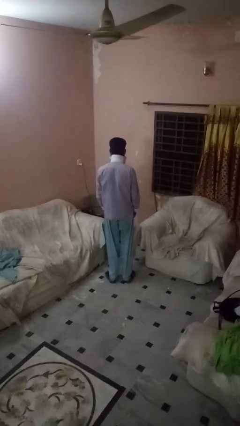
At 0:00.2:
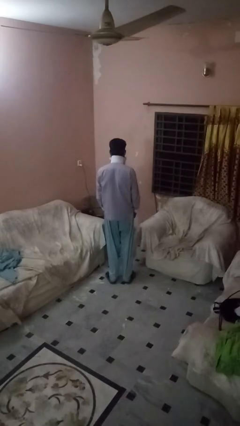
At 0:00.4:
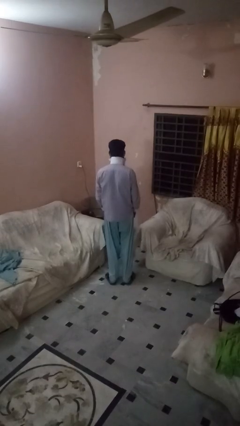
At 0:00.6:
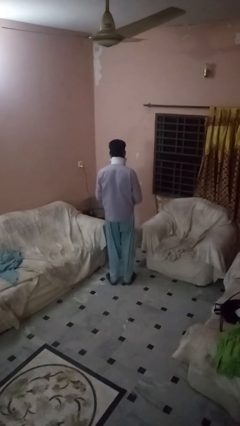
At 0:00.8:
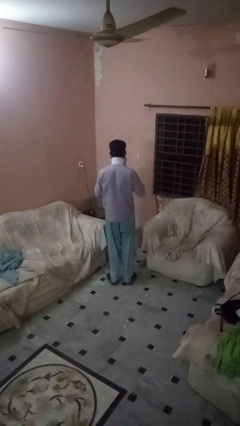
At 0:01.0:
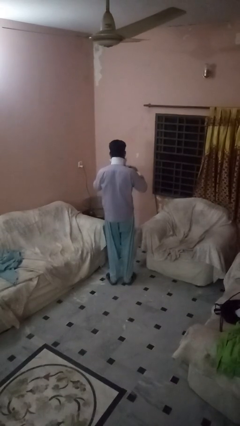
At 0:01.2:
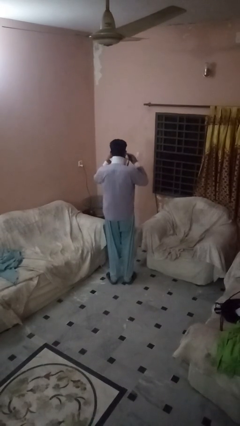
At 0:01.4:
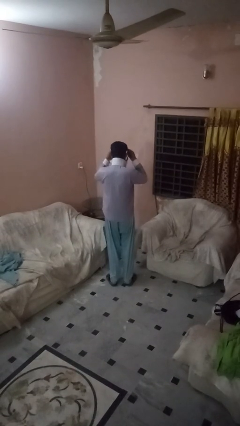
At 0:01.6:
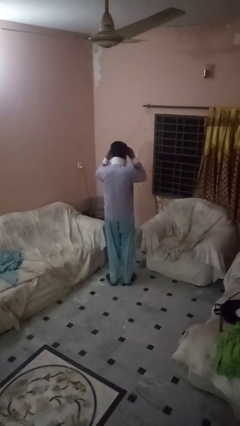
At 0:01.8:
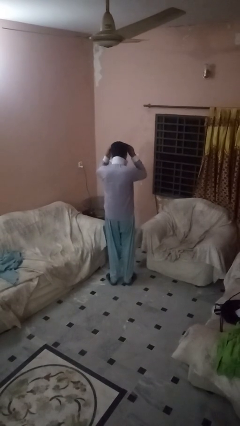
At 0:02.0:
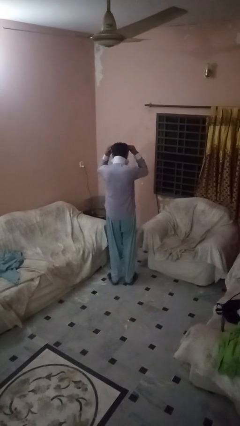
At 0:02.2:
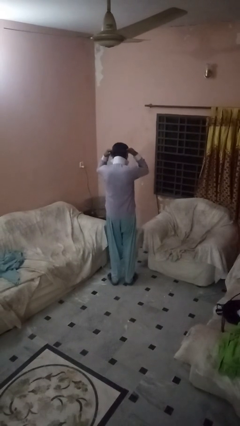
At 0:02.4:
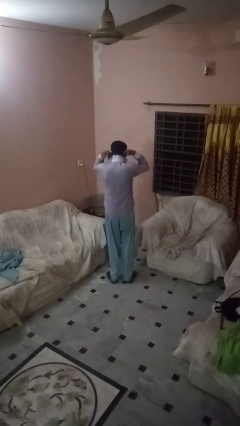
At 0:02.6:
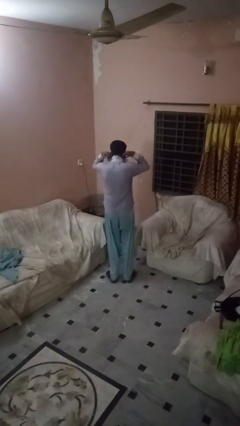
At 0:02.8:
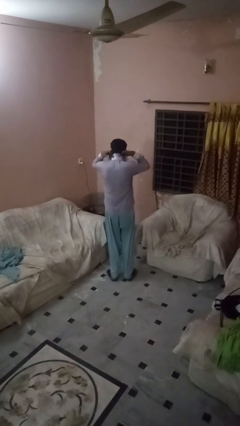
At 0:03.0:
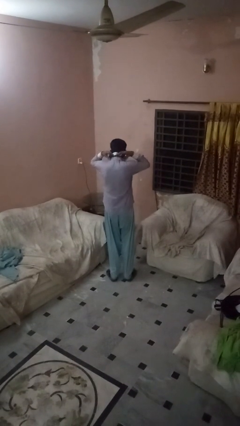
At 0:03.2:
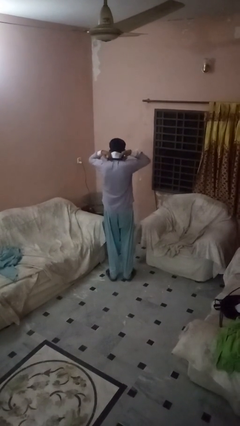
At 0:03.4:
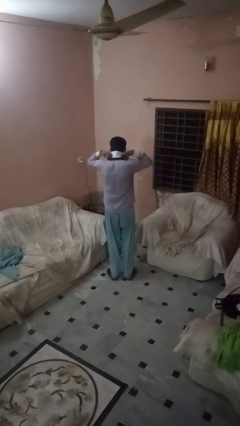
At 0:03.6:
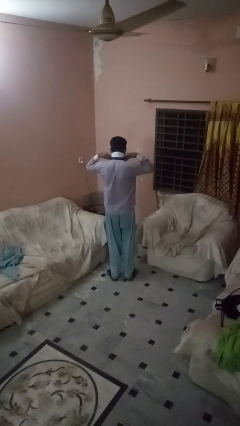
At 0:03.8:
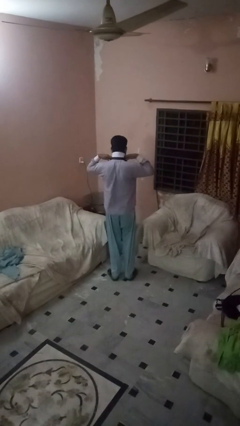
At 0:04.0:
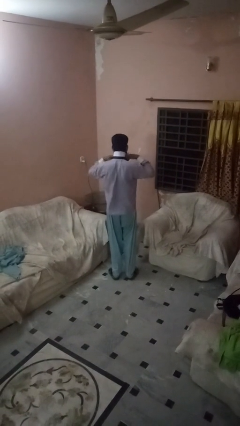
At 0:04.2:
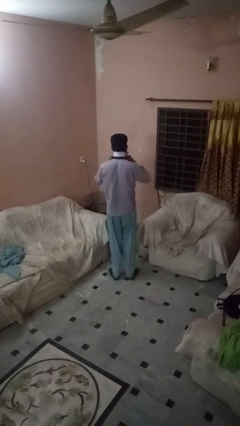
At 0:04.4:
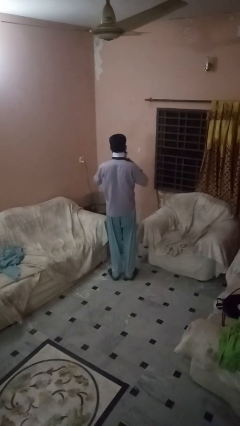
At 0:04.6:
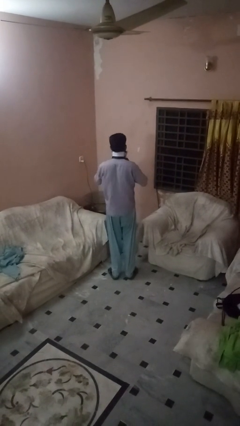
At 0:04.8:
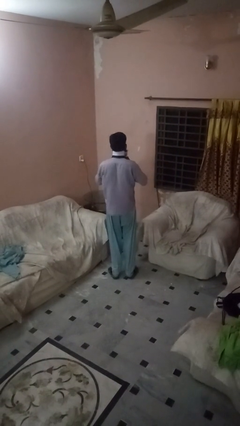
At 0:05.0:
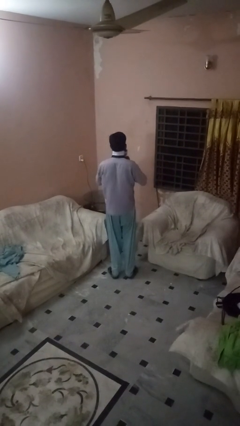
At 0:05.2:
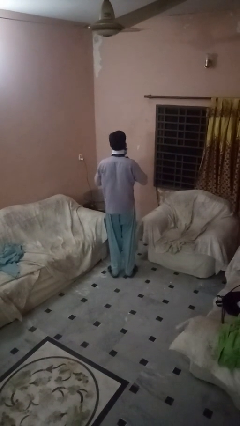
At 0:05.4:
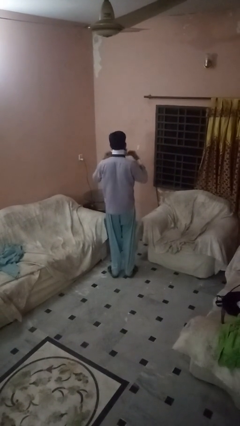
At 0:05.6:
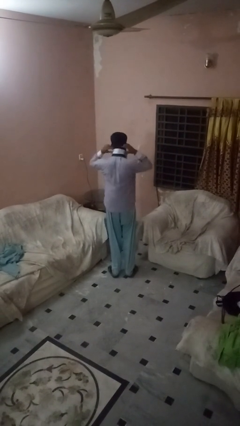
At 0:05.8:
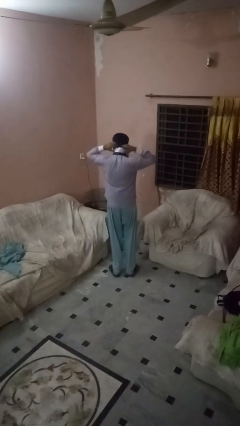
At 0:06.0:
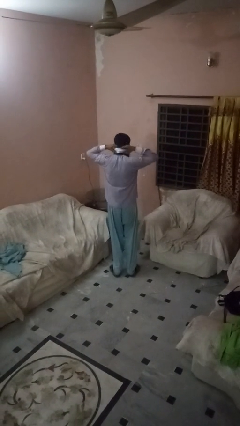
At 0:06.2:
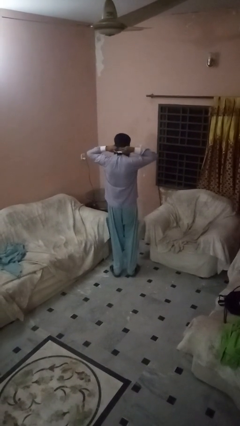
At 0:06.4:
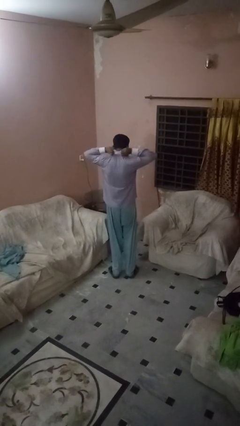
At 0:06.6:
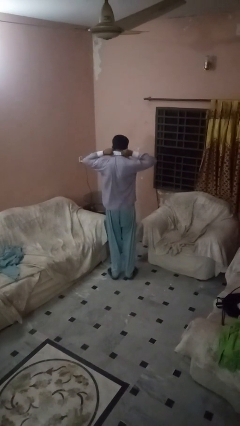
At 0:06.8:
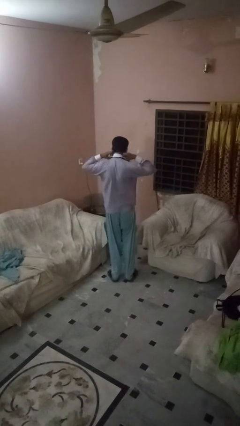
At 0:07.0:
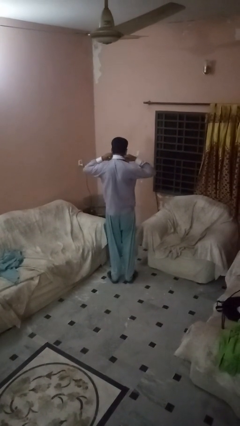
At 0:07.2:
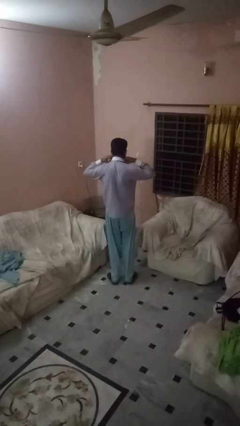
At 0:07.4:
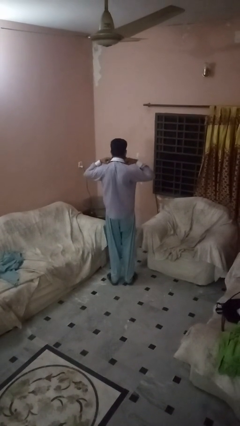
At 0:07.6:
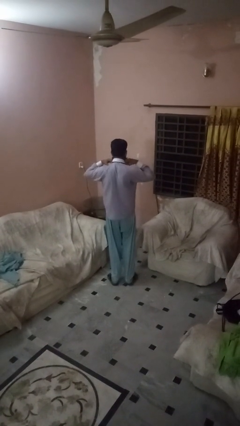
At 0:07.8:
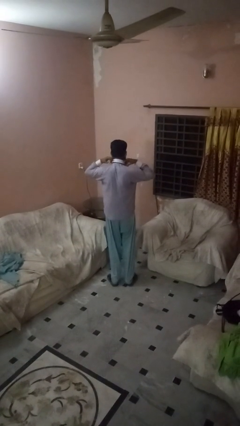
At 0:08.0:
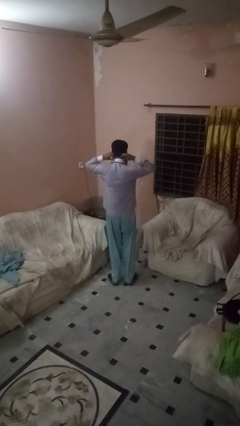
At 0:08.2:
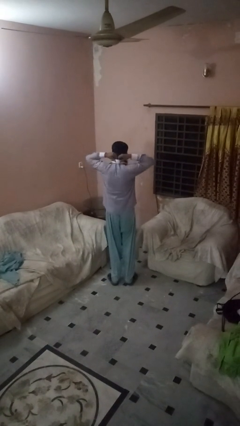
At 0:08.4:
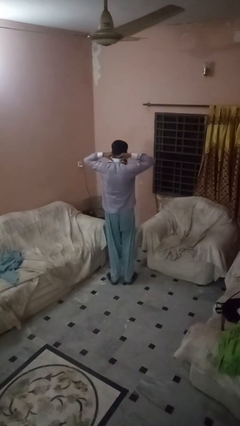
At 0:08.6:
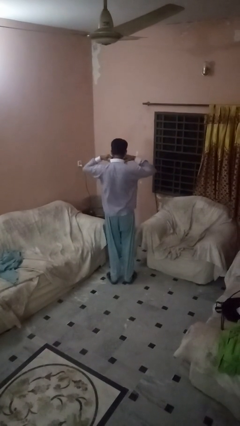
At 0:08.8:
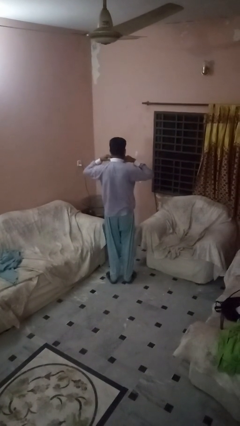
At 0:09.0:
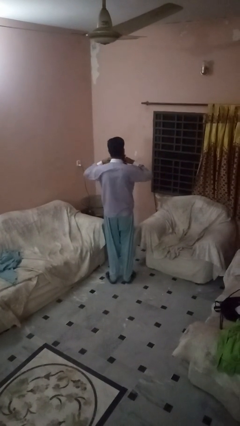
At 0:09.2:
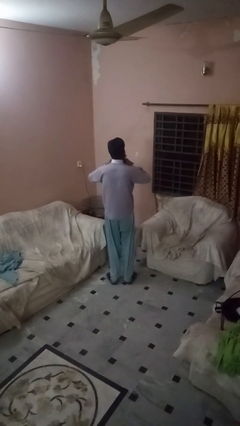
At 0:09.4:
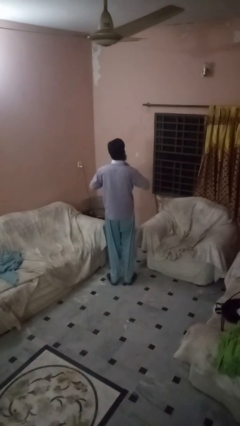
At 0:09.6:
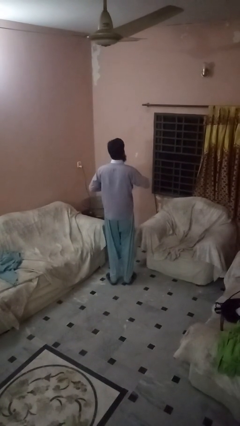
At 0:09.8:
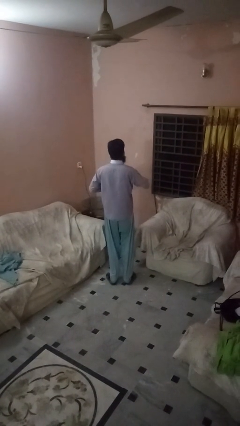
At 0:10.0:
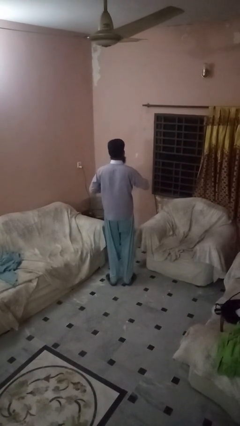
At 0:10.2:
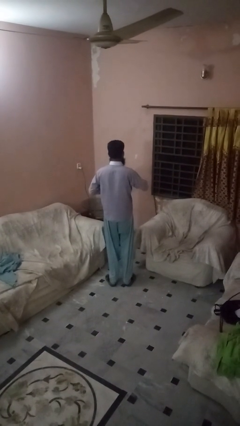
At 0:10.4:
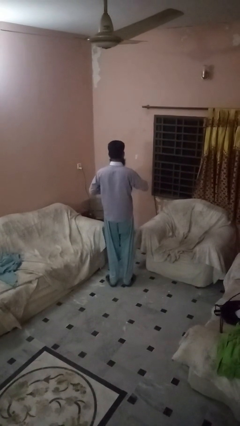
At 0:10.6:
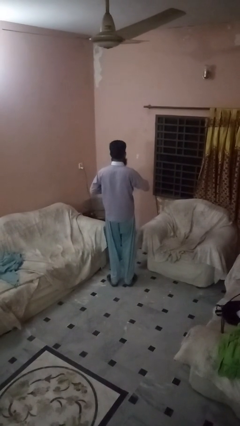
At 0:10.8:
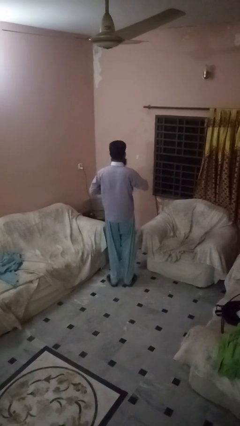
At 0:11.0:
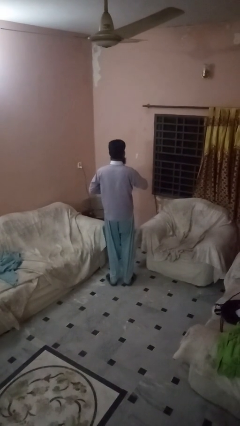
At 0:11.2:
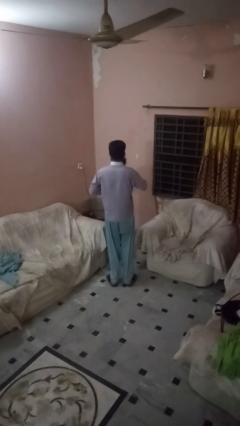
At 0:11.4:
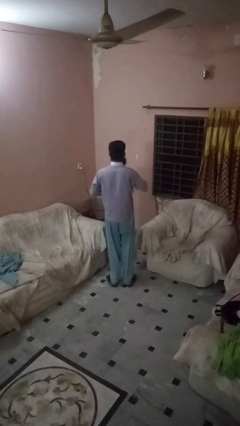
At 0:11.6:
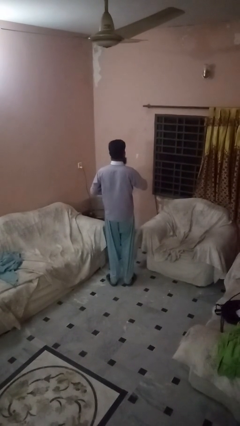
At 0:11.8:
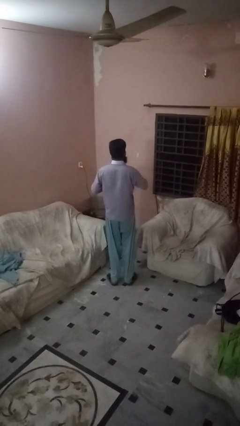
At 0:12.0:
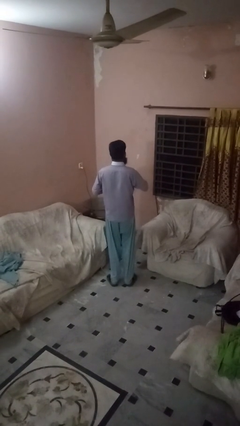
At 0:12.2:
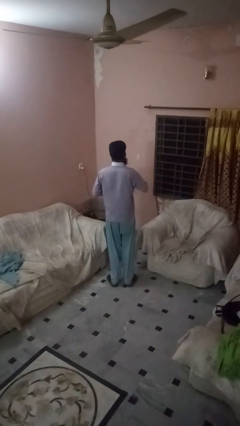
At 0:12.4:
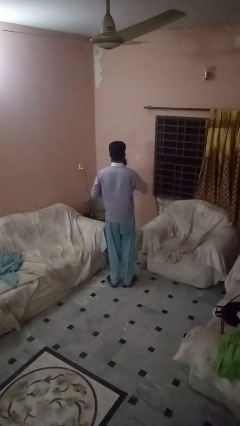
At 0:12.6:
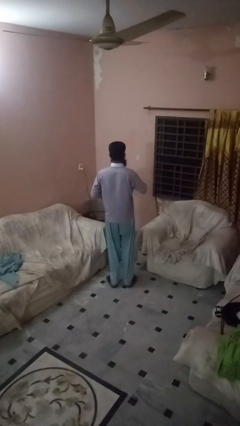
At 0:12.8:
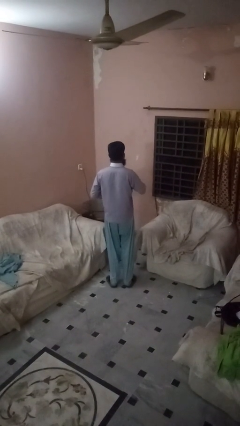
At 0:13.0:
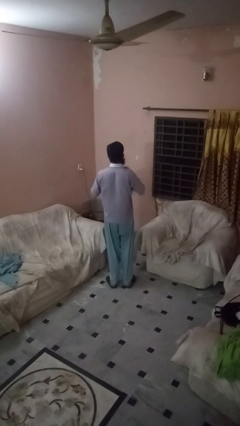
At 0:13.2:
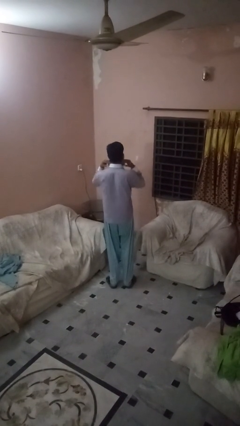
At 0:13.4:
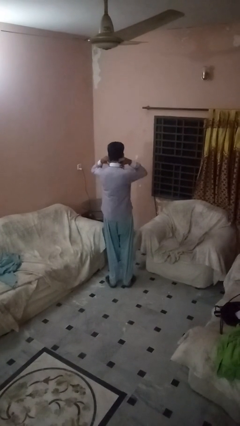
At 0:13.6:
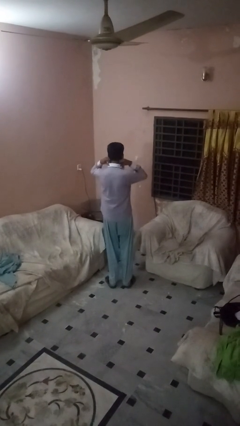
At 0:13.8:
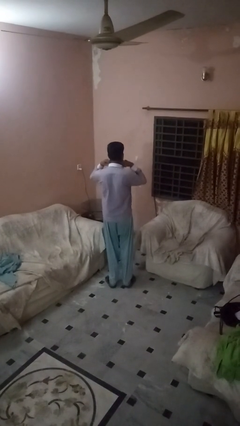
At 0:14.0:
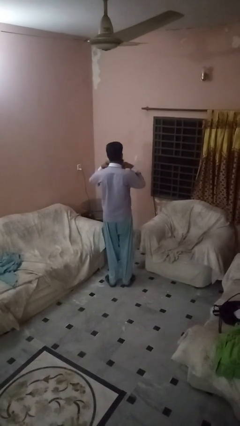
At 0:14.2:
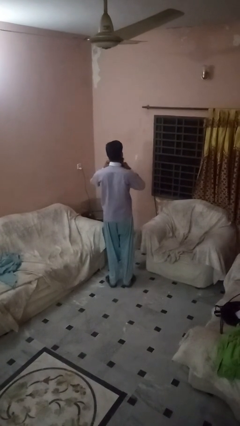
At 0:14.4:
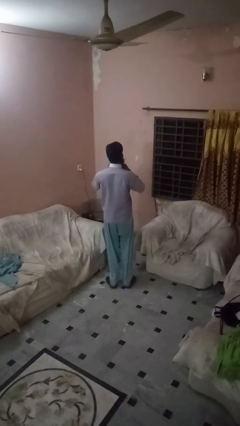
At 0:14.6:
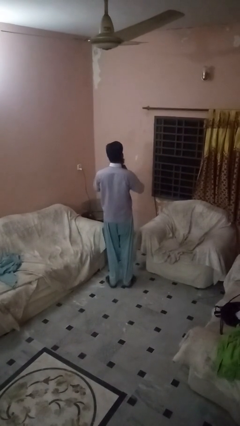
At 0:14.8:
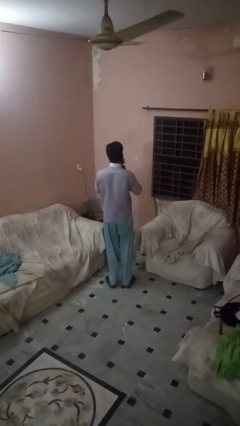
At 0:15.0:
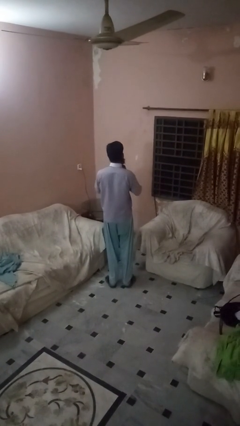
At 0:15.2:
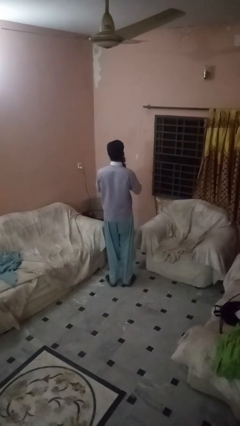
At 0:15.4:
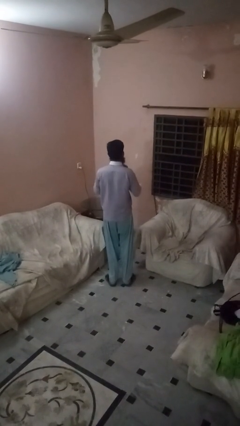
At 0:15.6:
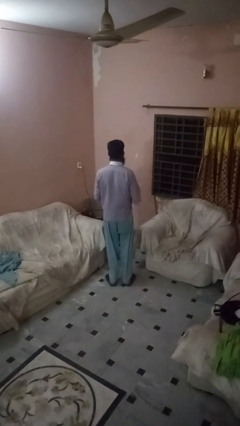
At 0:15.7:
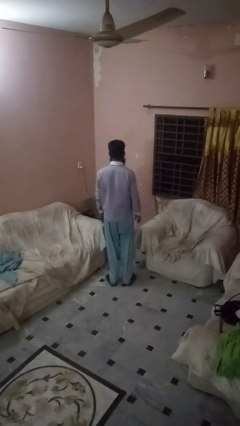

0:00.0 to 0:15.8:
person puts on necktie

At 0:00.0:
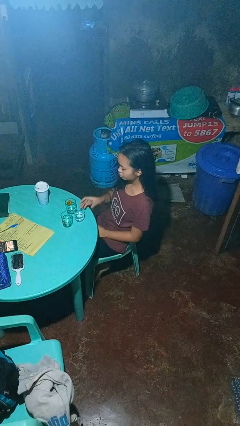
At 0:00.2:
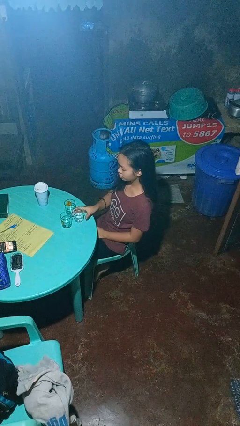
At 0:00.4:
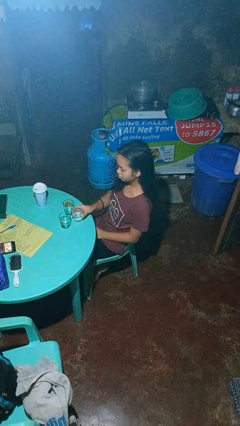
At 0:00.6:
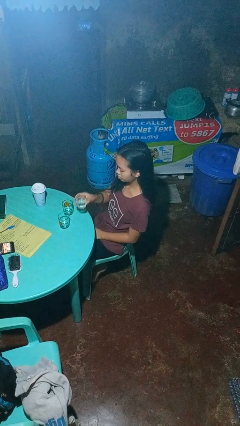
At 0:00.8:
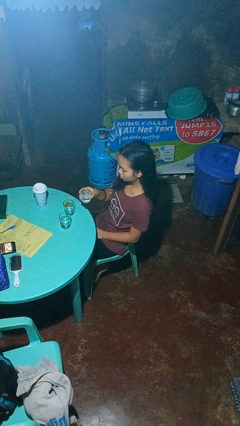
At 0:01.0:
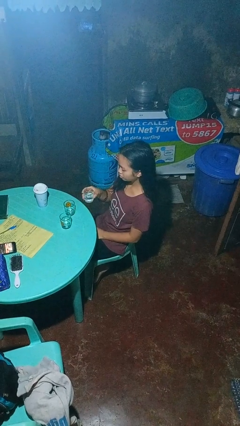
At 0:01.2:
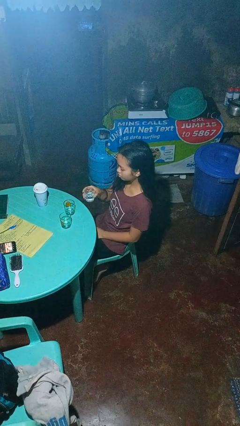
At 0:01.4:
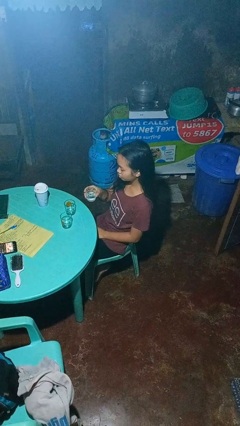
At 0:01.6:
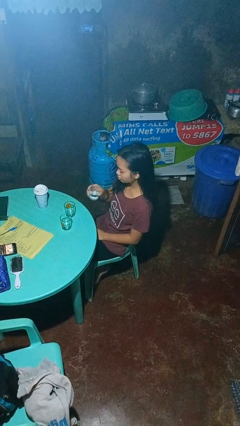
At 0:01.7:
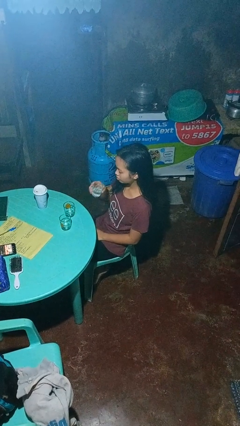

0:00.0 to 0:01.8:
person picks up object from table

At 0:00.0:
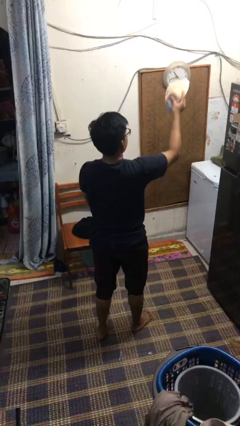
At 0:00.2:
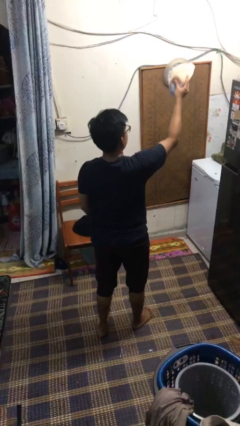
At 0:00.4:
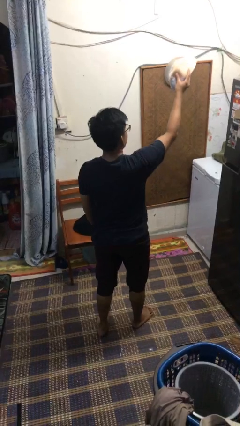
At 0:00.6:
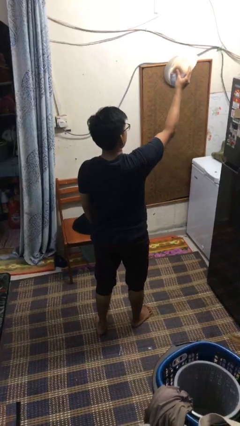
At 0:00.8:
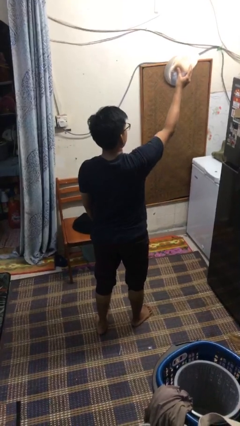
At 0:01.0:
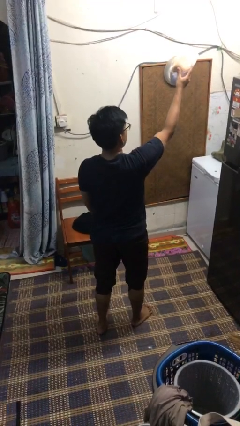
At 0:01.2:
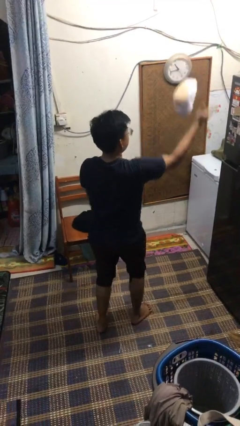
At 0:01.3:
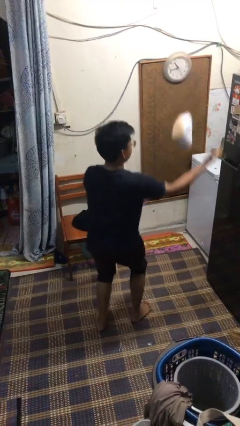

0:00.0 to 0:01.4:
person drops object
